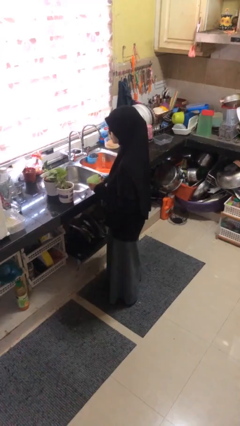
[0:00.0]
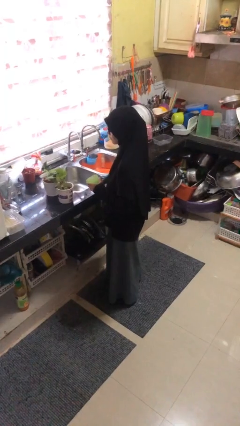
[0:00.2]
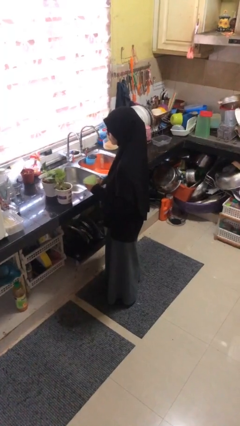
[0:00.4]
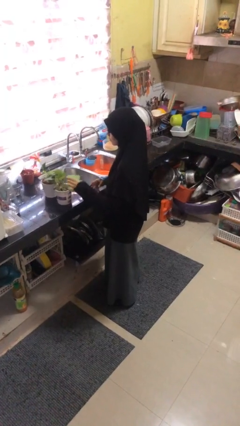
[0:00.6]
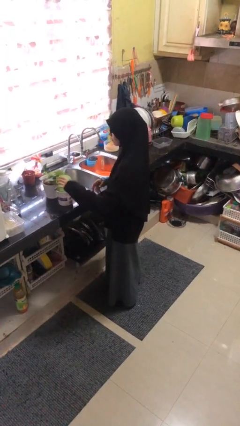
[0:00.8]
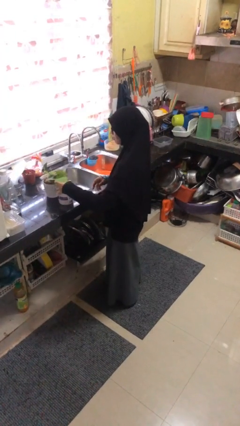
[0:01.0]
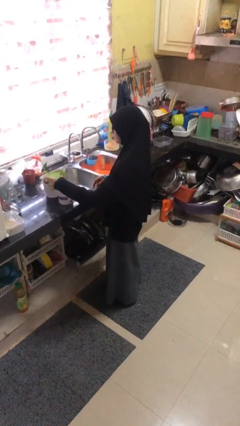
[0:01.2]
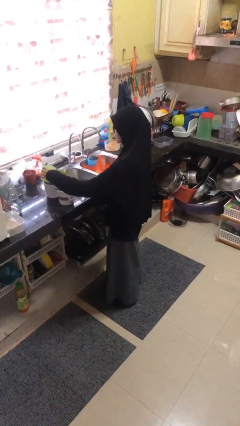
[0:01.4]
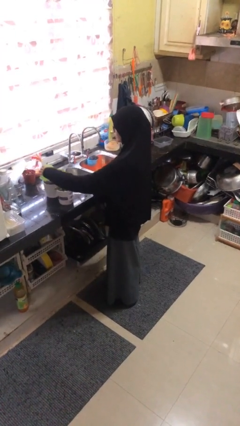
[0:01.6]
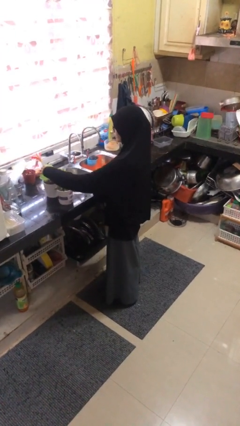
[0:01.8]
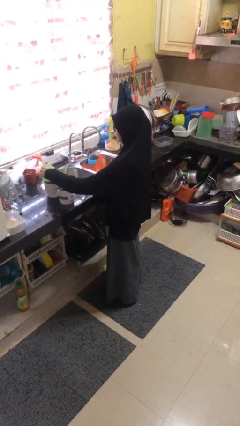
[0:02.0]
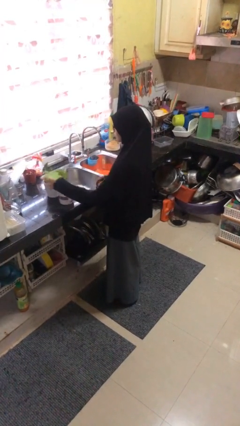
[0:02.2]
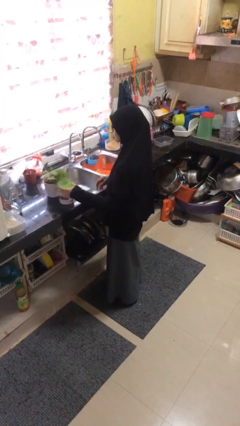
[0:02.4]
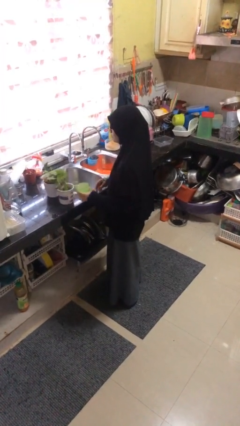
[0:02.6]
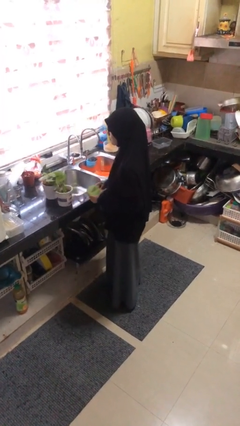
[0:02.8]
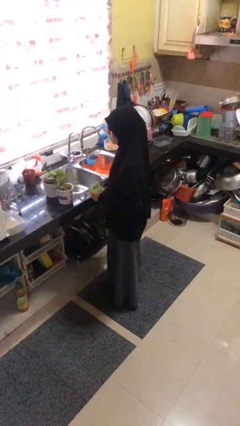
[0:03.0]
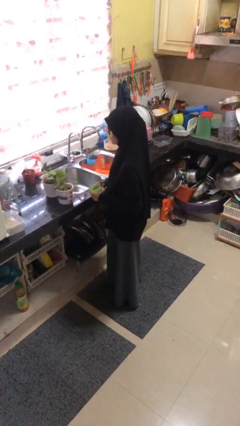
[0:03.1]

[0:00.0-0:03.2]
person waters houseplant

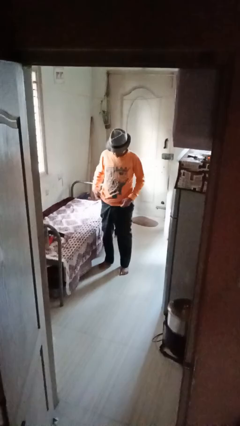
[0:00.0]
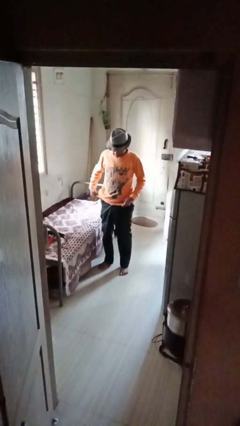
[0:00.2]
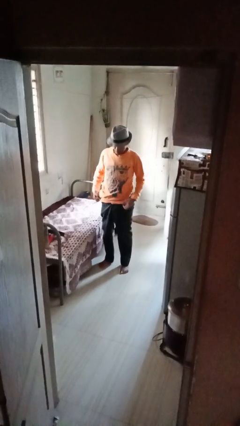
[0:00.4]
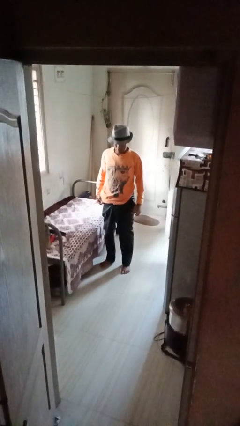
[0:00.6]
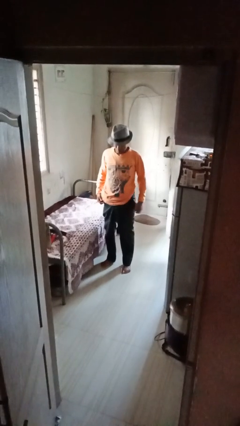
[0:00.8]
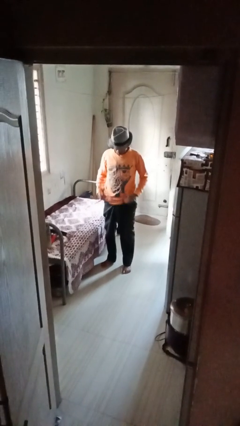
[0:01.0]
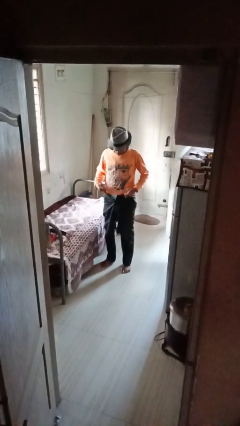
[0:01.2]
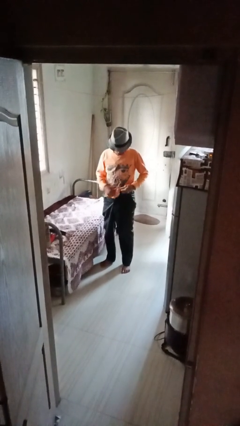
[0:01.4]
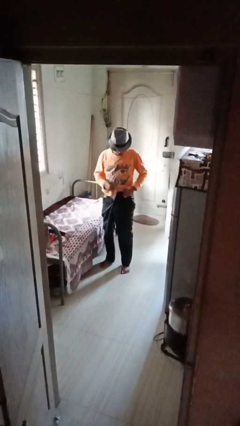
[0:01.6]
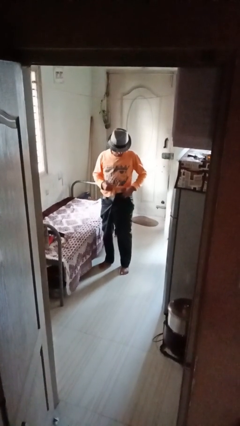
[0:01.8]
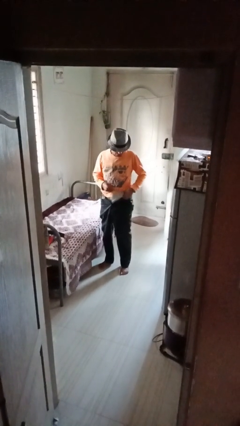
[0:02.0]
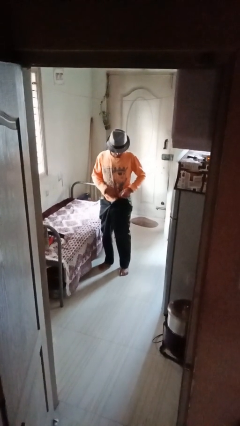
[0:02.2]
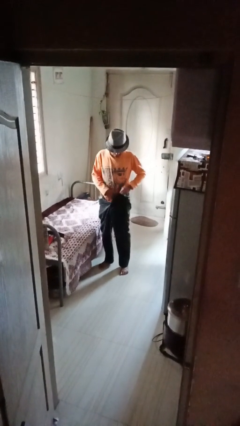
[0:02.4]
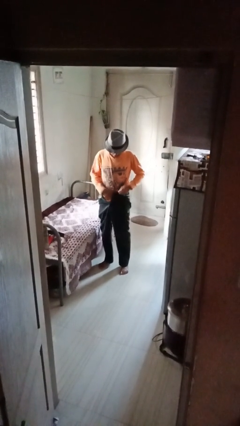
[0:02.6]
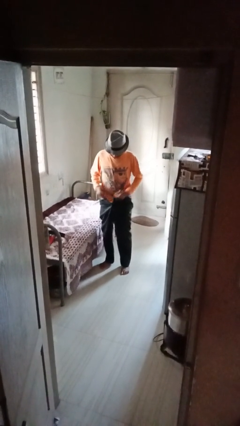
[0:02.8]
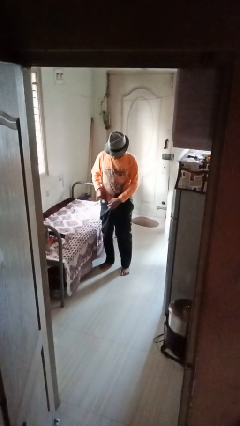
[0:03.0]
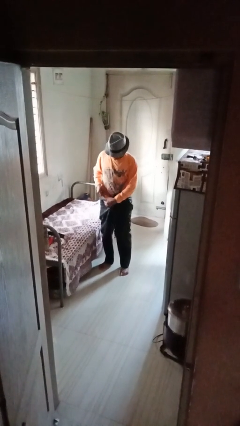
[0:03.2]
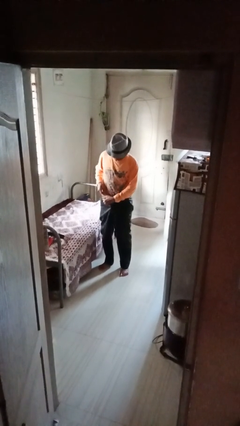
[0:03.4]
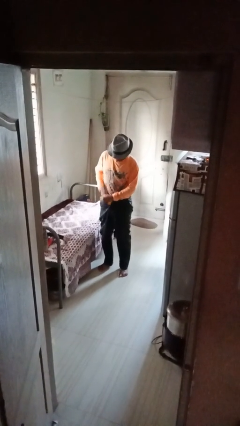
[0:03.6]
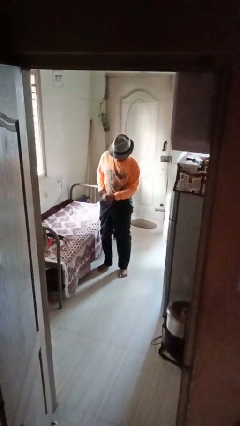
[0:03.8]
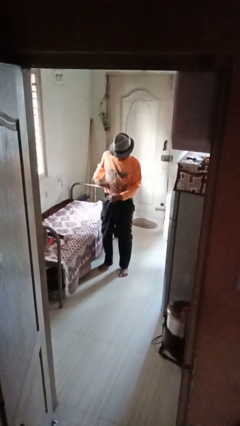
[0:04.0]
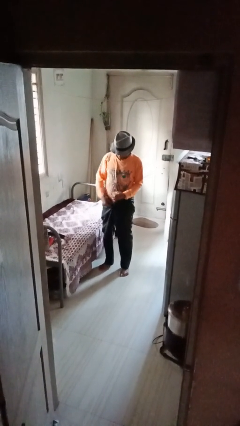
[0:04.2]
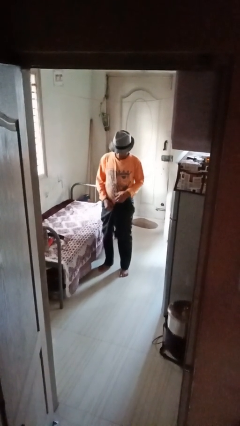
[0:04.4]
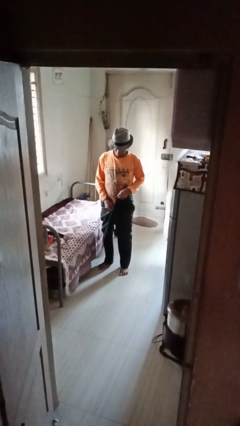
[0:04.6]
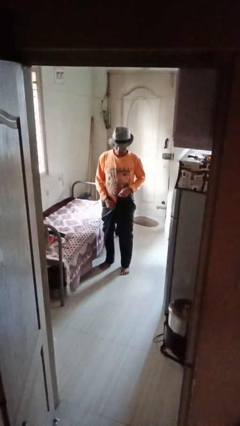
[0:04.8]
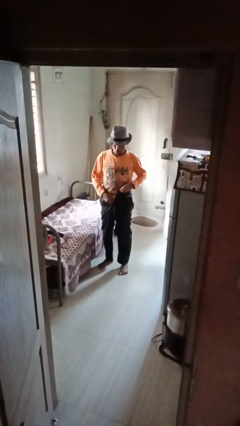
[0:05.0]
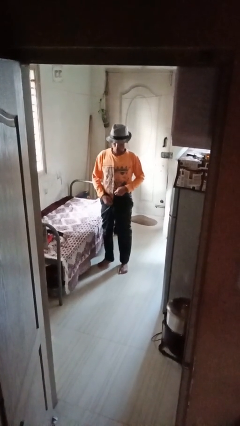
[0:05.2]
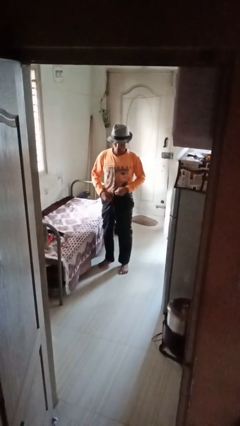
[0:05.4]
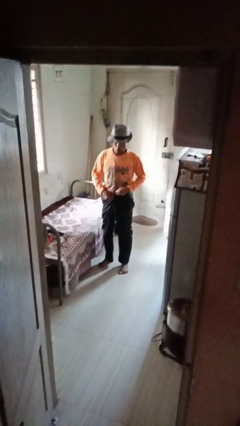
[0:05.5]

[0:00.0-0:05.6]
person tucks in shirt

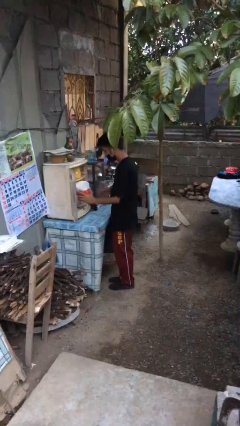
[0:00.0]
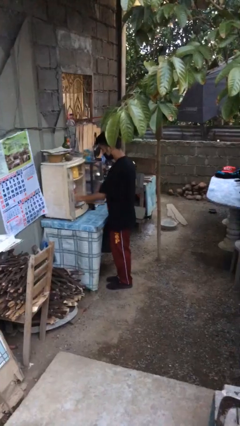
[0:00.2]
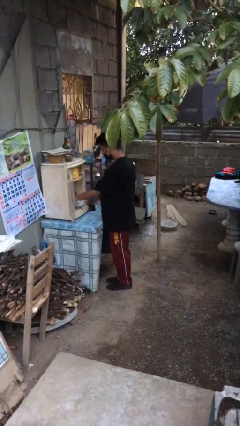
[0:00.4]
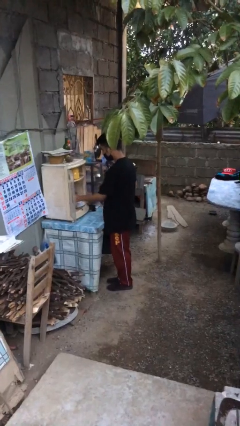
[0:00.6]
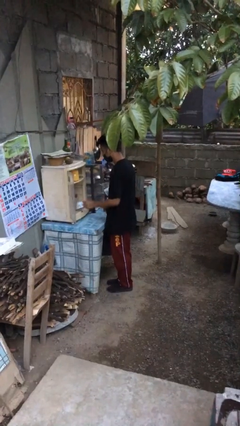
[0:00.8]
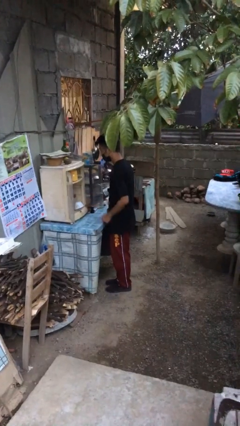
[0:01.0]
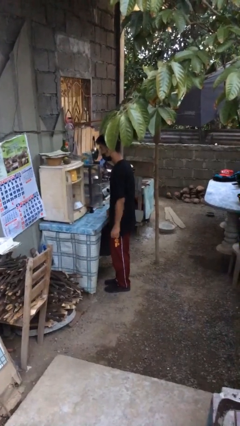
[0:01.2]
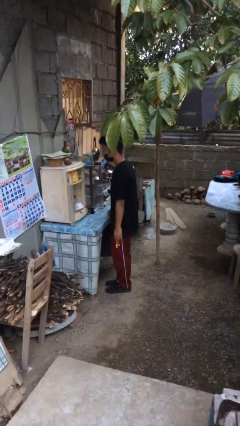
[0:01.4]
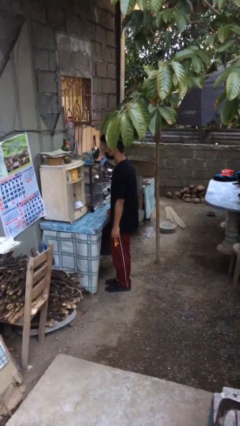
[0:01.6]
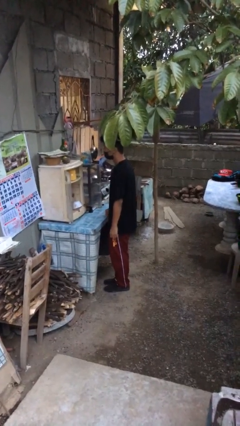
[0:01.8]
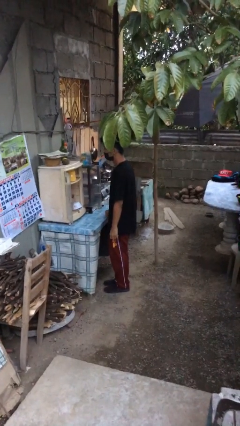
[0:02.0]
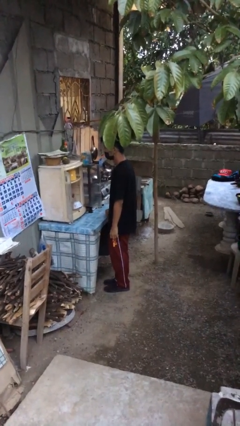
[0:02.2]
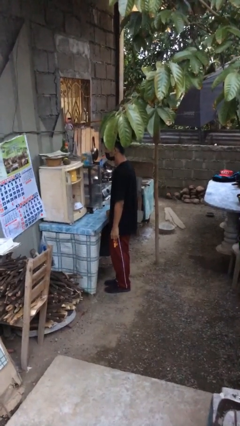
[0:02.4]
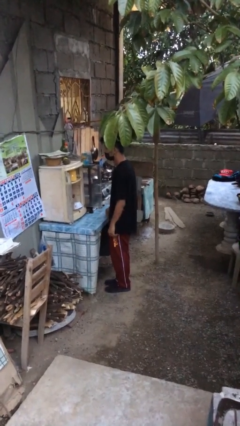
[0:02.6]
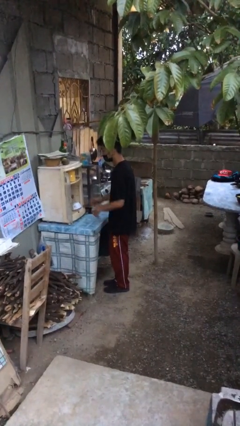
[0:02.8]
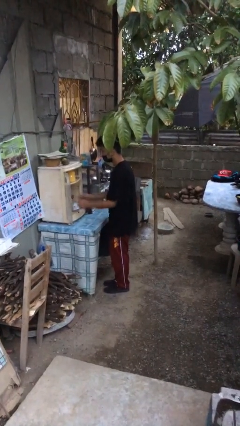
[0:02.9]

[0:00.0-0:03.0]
person puts down object into cabinet

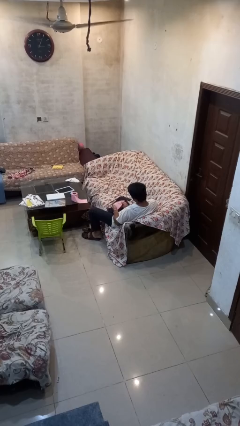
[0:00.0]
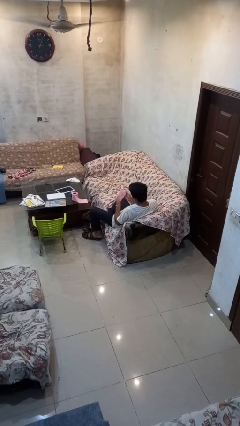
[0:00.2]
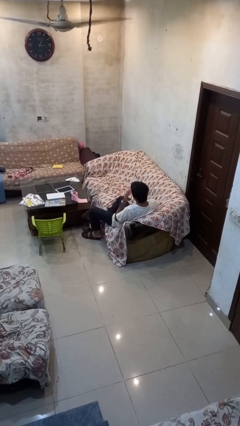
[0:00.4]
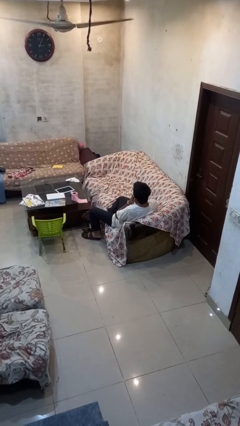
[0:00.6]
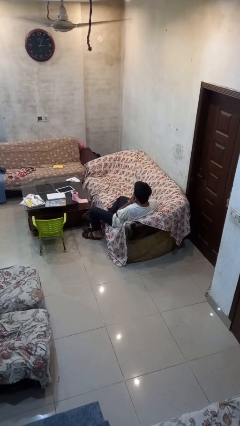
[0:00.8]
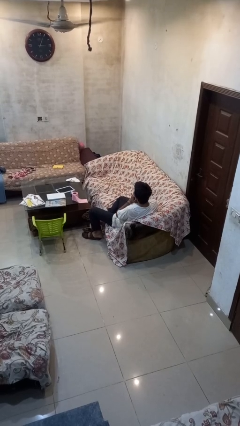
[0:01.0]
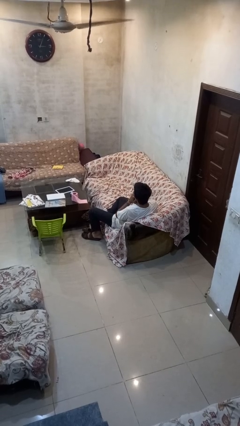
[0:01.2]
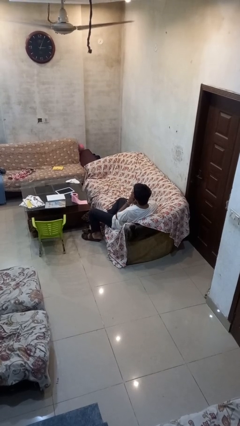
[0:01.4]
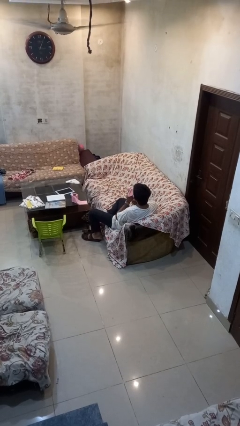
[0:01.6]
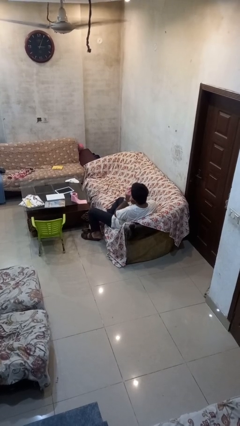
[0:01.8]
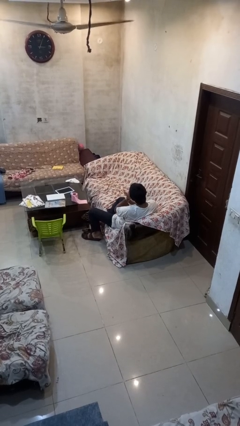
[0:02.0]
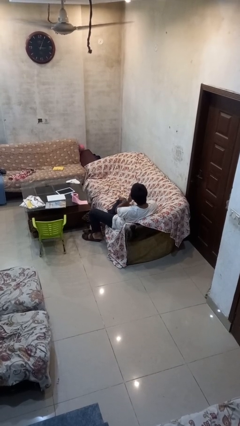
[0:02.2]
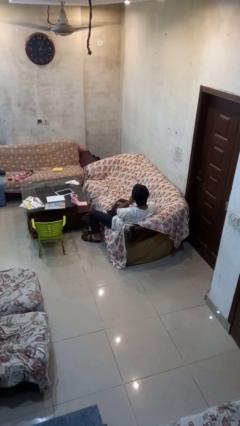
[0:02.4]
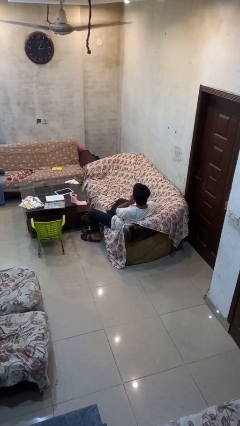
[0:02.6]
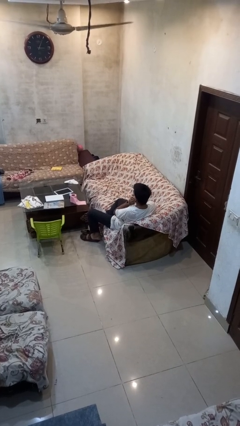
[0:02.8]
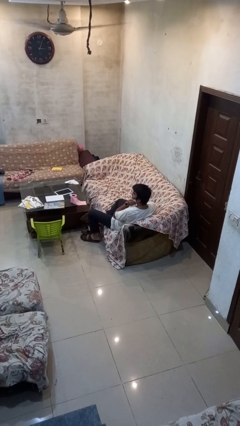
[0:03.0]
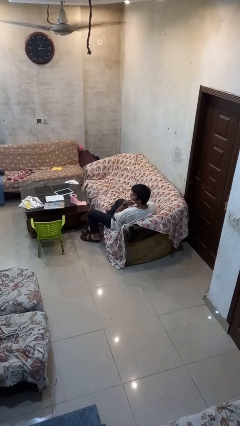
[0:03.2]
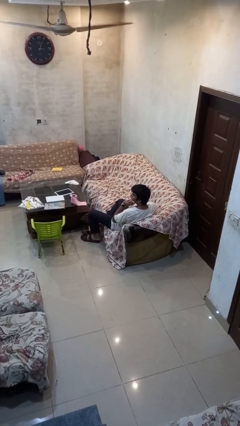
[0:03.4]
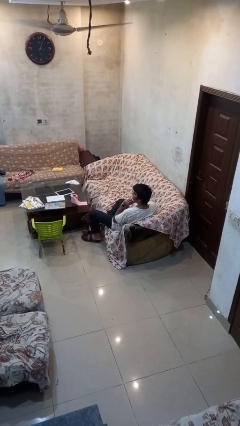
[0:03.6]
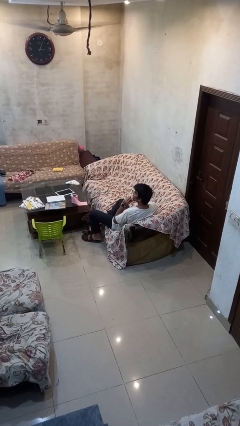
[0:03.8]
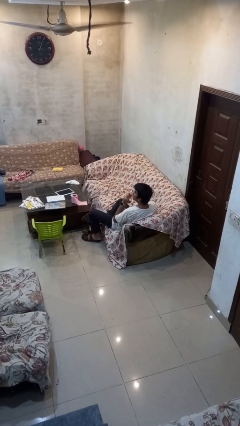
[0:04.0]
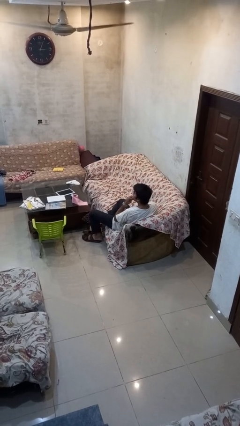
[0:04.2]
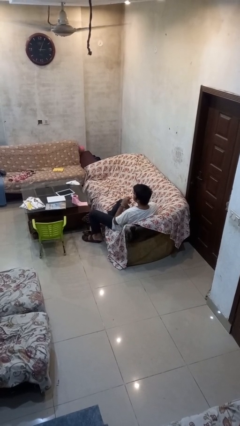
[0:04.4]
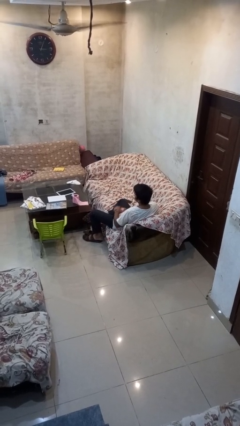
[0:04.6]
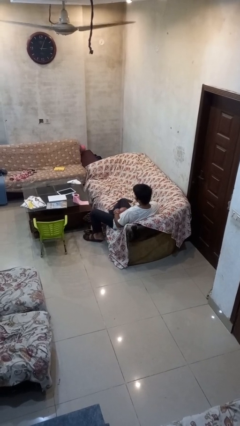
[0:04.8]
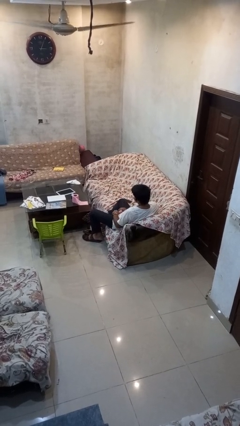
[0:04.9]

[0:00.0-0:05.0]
person wipes mouth with napkin

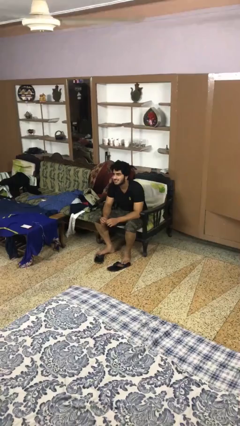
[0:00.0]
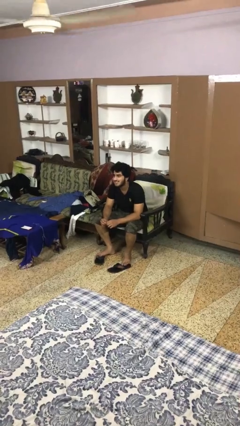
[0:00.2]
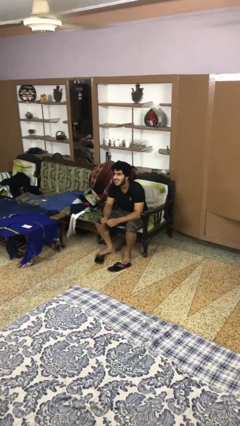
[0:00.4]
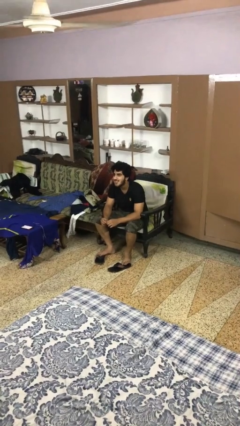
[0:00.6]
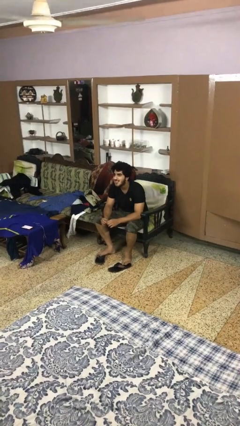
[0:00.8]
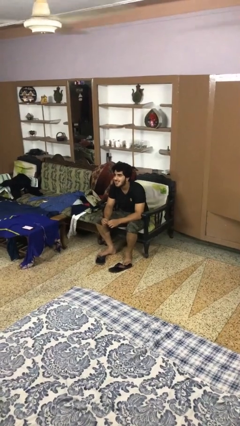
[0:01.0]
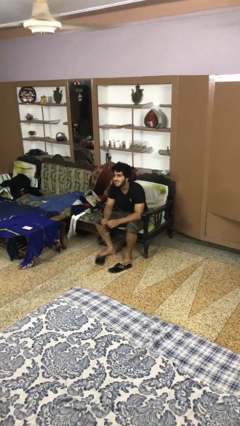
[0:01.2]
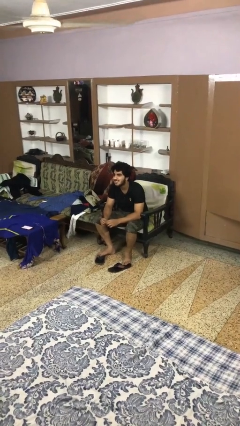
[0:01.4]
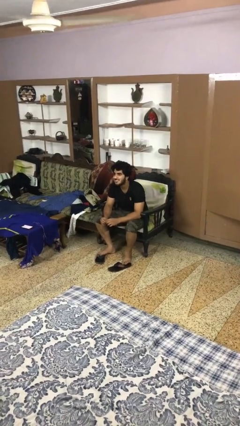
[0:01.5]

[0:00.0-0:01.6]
person sticks out tongue
